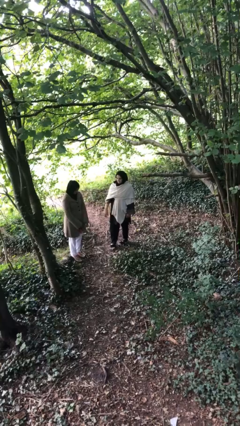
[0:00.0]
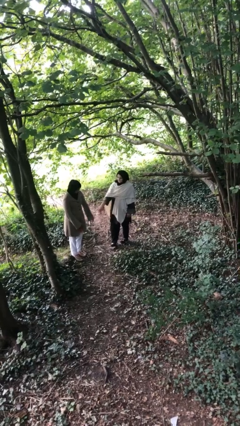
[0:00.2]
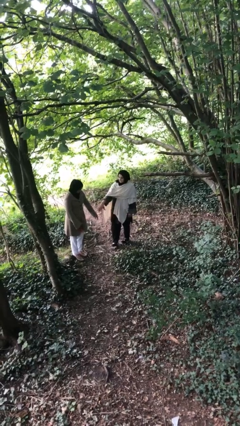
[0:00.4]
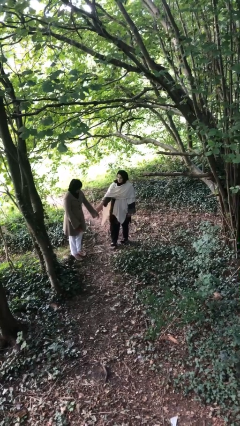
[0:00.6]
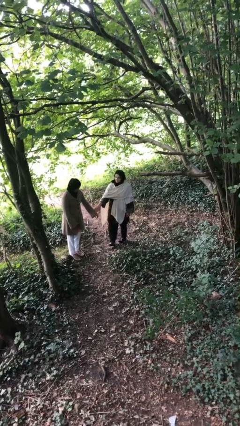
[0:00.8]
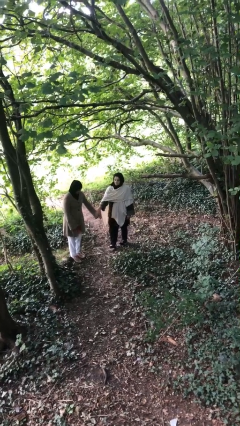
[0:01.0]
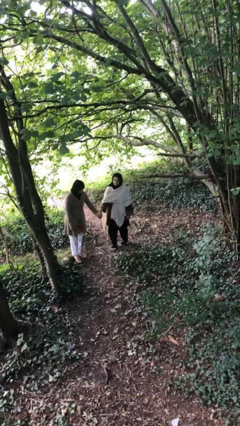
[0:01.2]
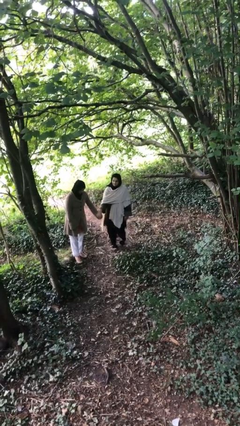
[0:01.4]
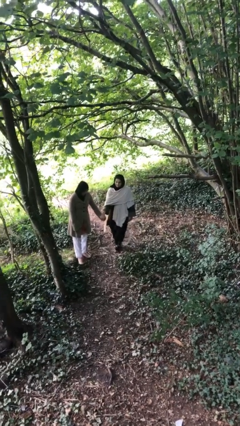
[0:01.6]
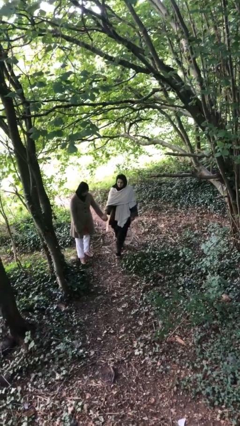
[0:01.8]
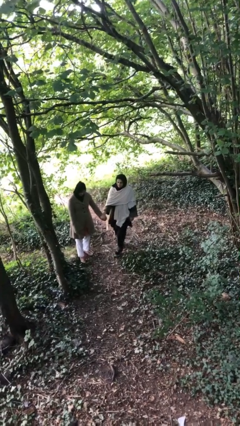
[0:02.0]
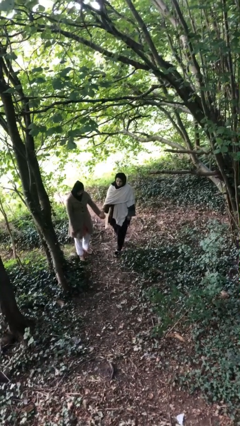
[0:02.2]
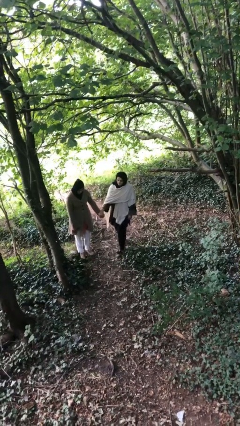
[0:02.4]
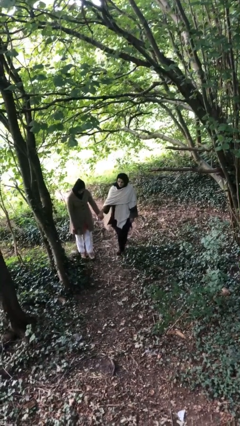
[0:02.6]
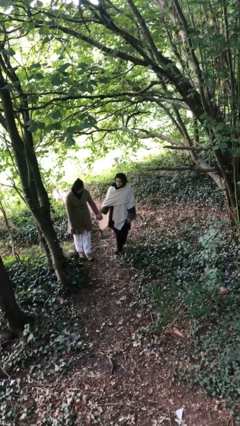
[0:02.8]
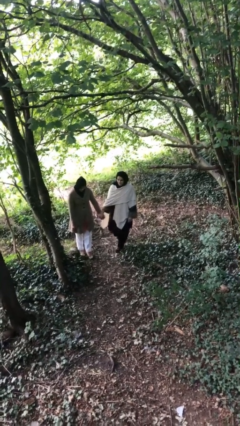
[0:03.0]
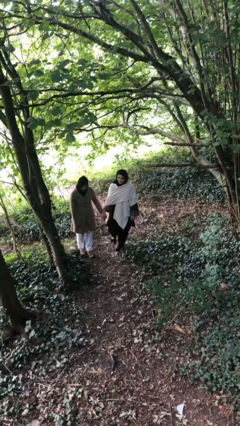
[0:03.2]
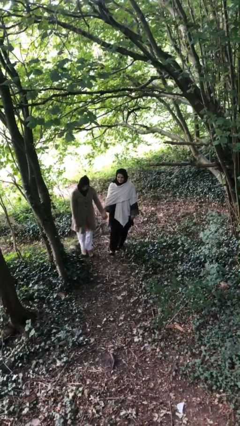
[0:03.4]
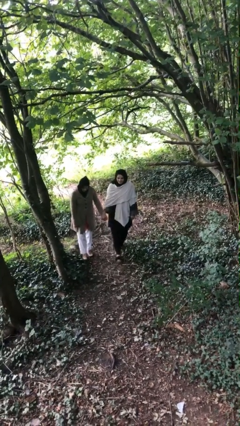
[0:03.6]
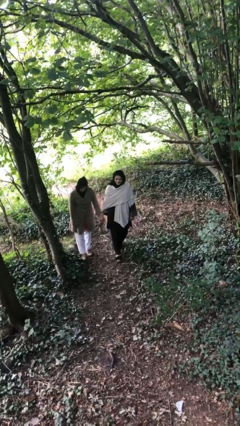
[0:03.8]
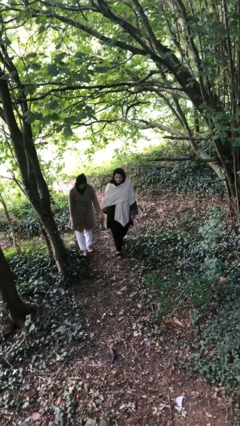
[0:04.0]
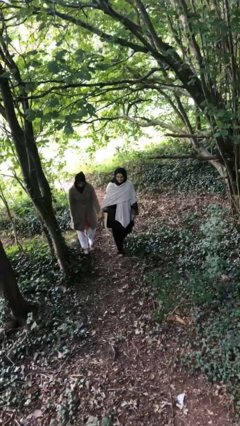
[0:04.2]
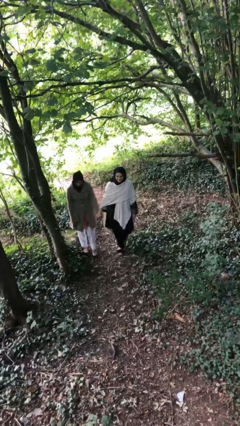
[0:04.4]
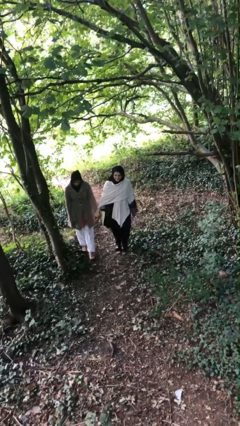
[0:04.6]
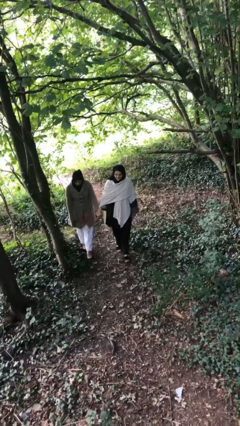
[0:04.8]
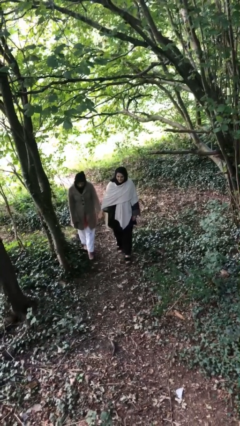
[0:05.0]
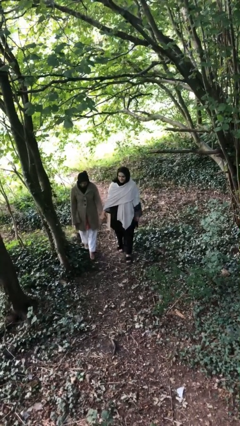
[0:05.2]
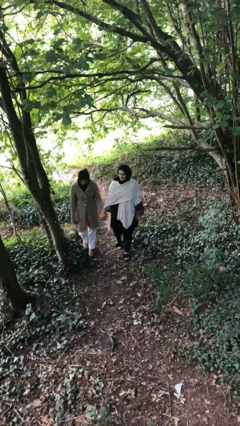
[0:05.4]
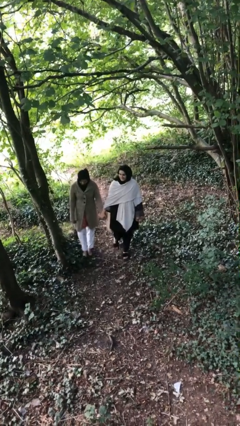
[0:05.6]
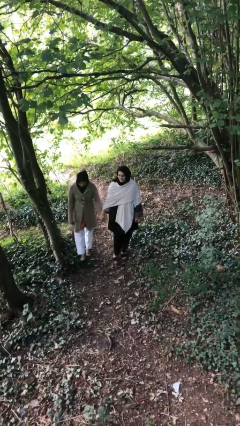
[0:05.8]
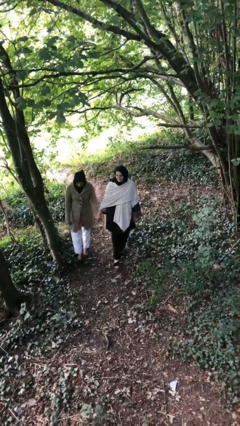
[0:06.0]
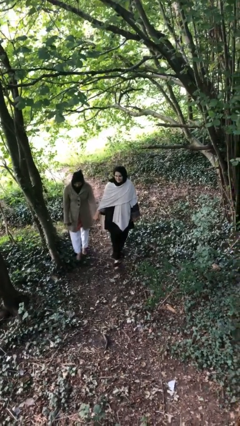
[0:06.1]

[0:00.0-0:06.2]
person holds hand

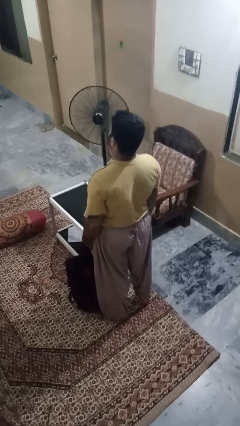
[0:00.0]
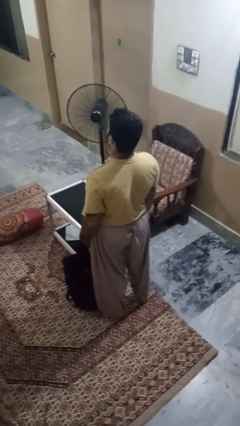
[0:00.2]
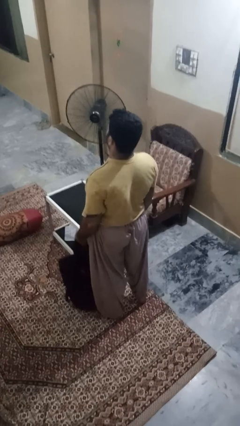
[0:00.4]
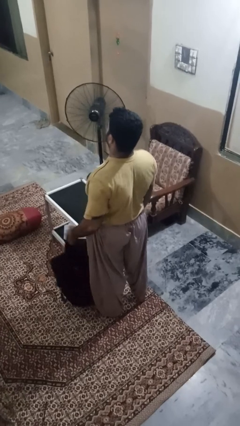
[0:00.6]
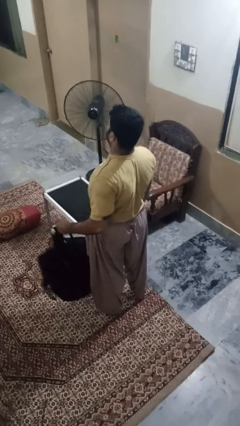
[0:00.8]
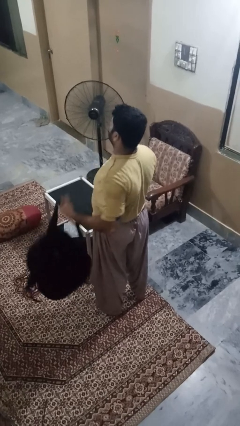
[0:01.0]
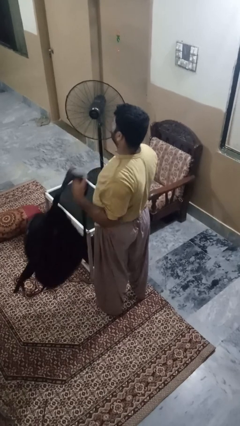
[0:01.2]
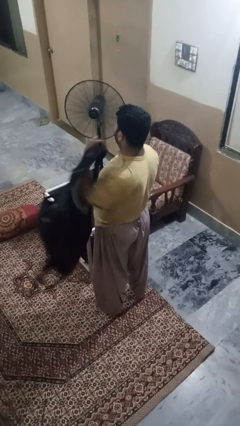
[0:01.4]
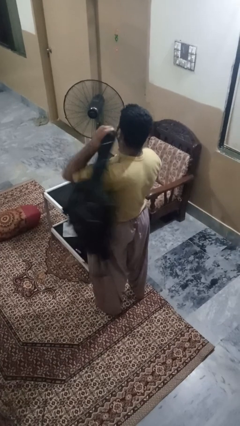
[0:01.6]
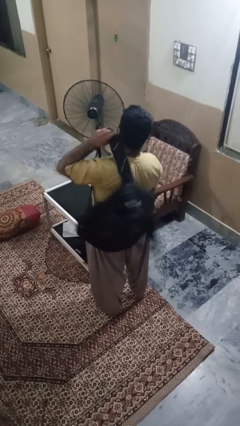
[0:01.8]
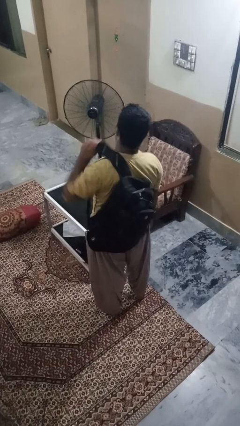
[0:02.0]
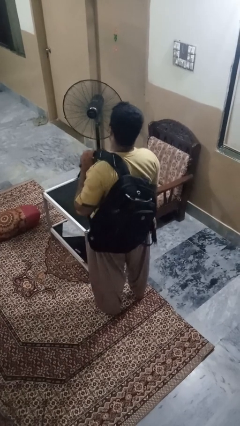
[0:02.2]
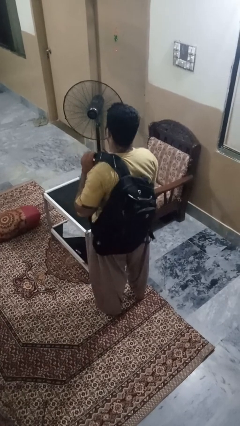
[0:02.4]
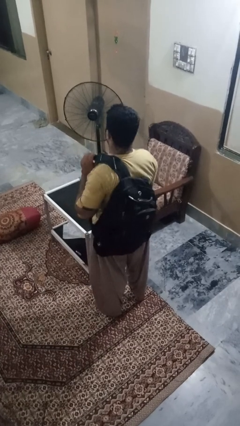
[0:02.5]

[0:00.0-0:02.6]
person puts on backpack

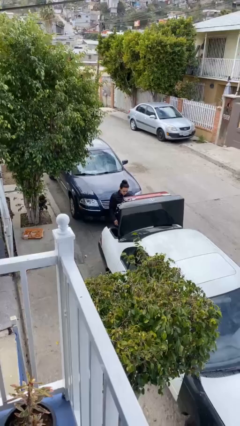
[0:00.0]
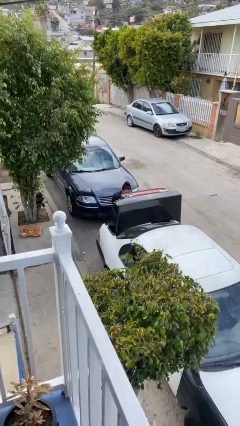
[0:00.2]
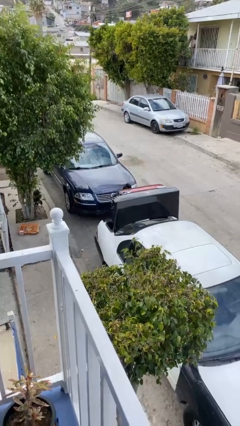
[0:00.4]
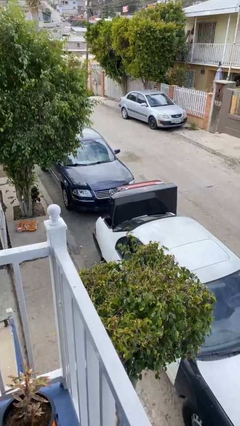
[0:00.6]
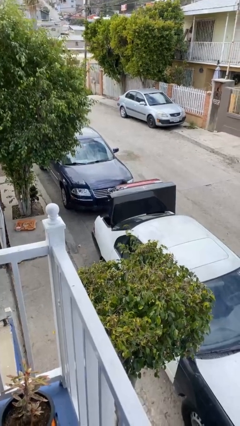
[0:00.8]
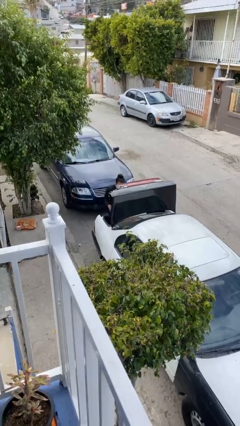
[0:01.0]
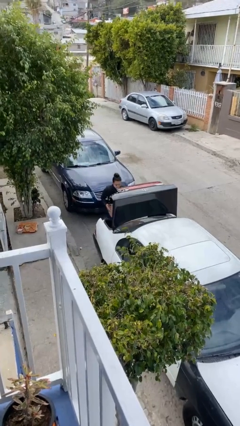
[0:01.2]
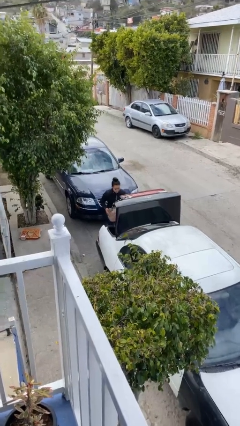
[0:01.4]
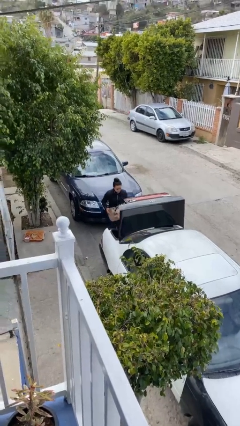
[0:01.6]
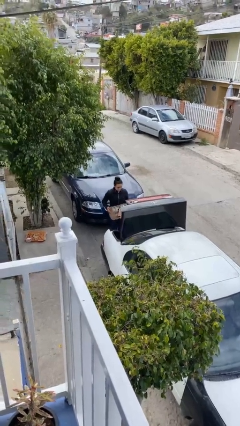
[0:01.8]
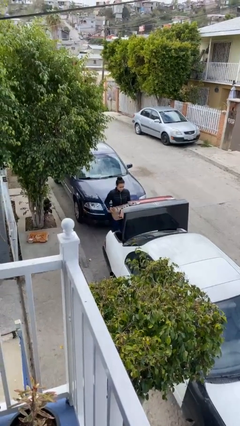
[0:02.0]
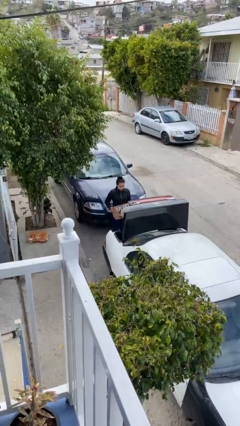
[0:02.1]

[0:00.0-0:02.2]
person unloads car

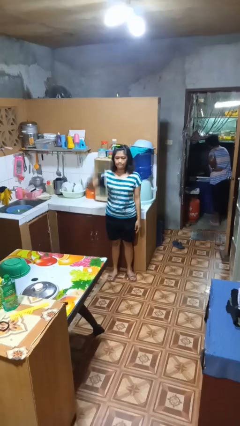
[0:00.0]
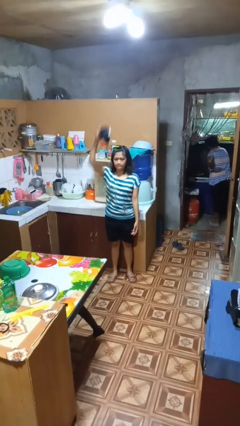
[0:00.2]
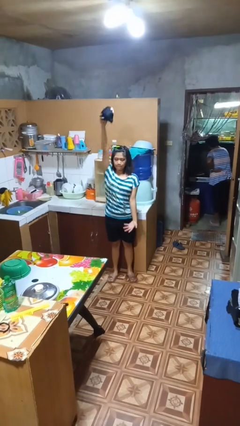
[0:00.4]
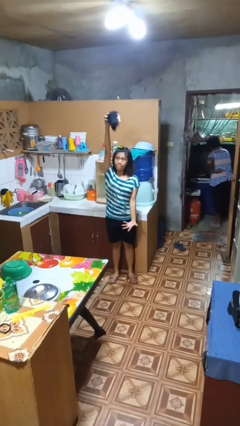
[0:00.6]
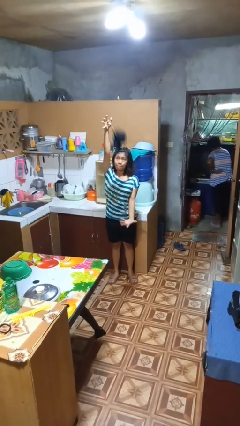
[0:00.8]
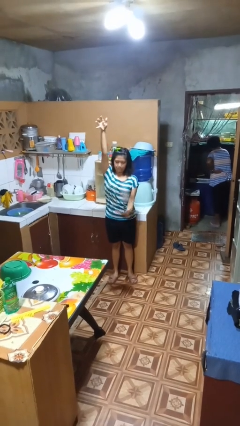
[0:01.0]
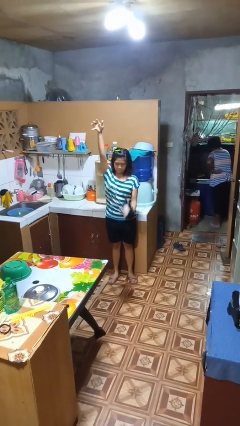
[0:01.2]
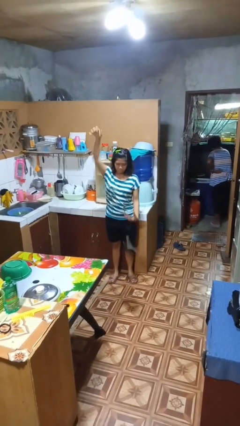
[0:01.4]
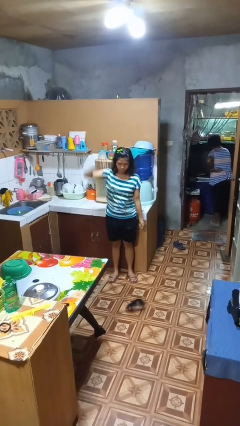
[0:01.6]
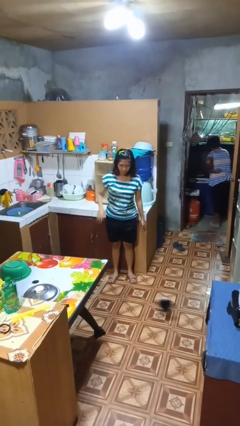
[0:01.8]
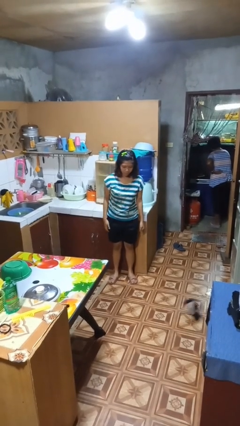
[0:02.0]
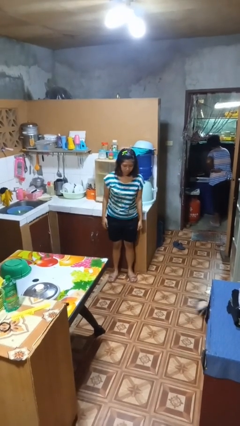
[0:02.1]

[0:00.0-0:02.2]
person drops object

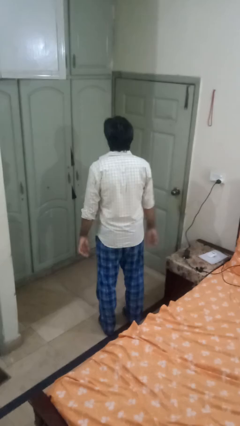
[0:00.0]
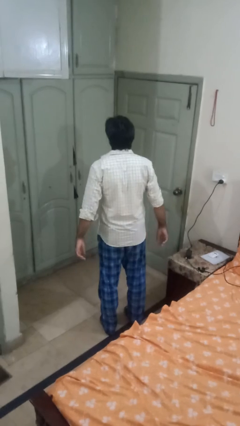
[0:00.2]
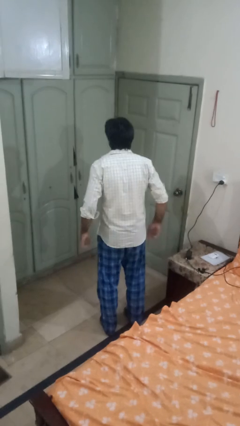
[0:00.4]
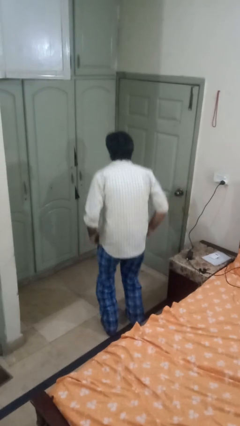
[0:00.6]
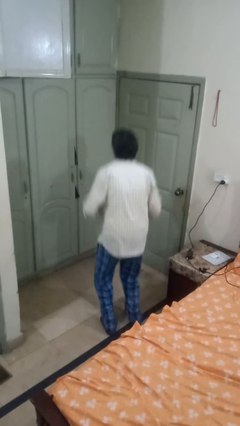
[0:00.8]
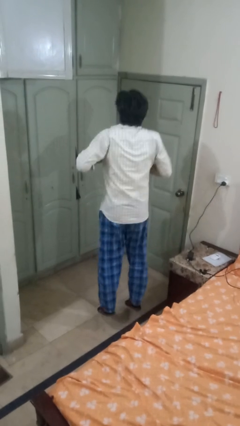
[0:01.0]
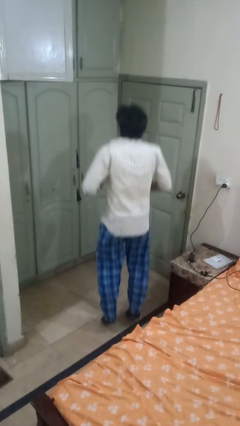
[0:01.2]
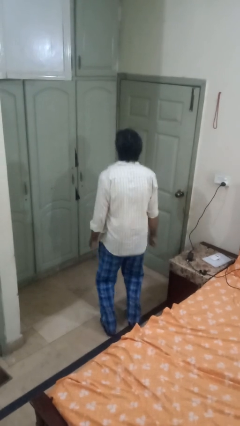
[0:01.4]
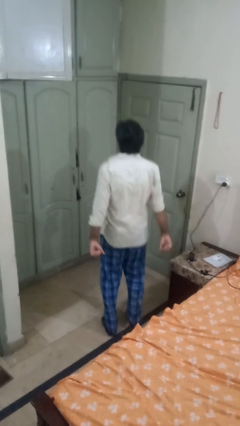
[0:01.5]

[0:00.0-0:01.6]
person jumps

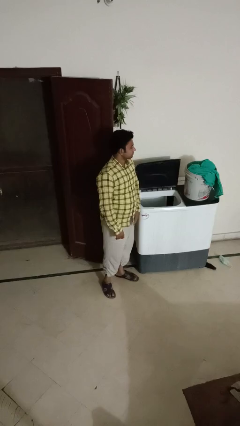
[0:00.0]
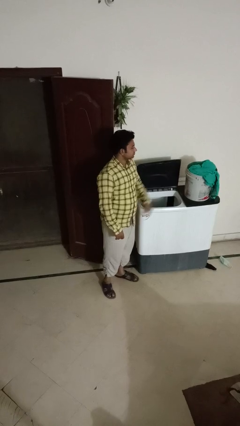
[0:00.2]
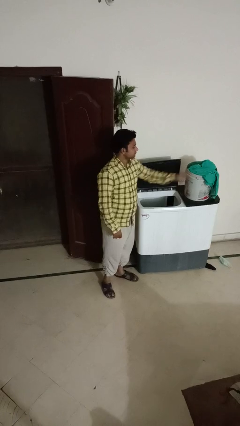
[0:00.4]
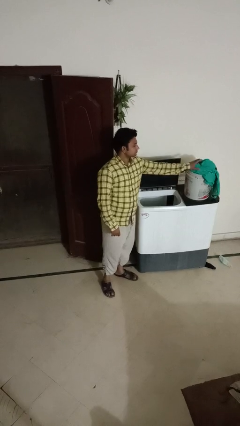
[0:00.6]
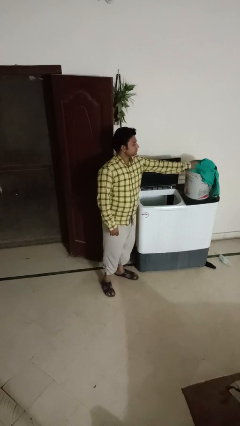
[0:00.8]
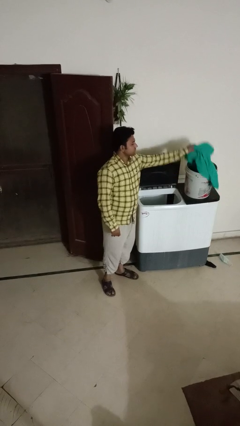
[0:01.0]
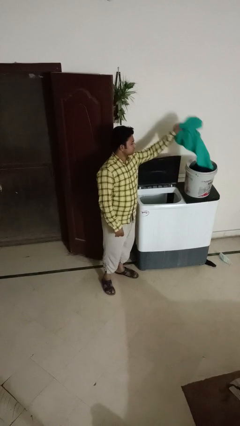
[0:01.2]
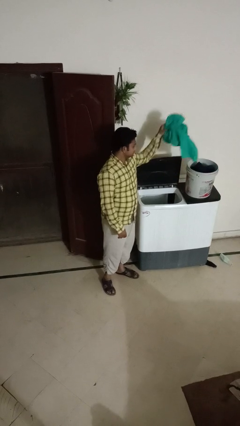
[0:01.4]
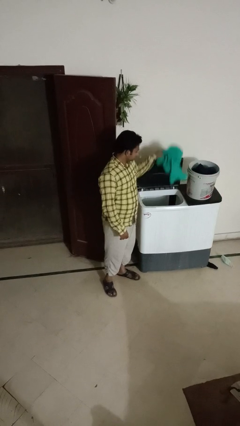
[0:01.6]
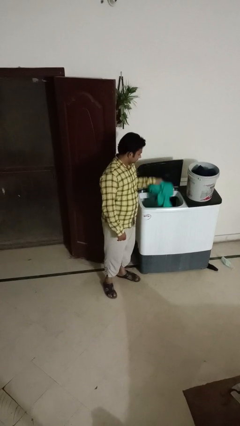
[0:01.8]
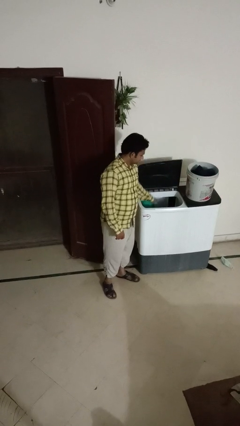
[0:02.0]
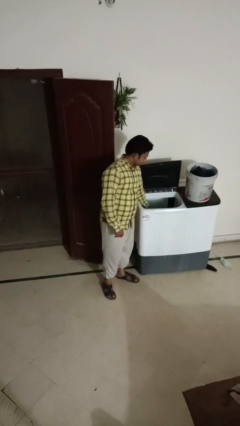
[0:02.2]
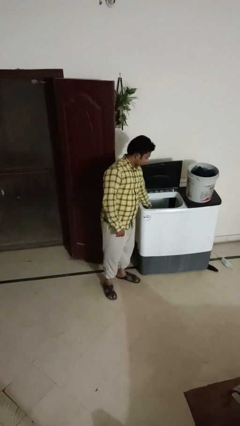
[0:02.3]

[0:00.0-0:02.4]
person loads clotheswasher
